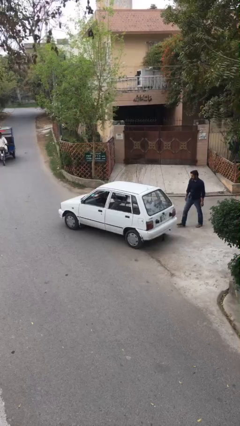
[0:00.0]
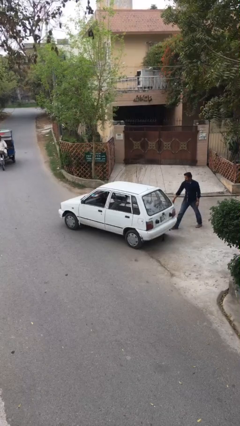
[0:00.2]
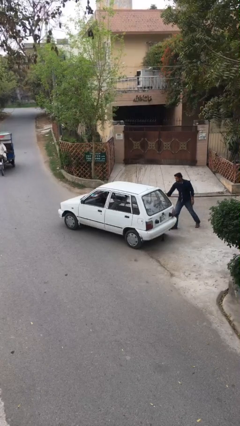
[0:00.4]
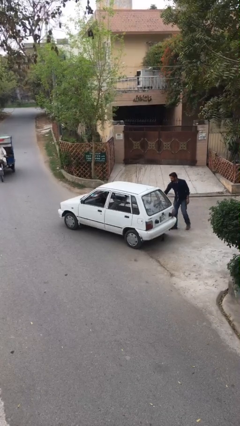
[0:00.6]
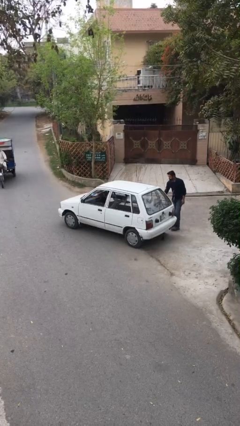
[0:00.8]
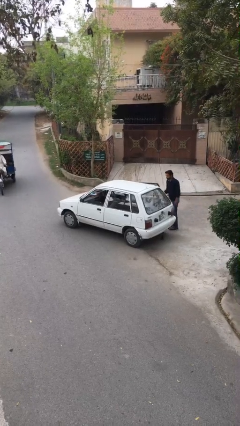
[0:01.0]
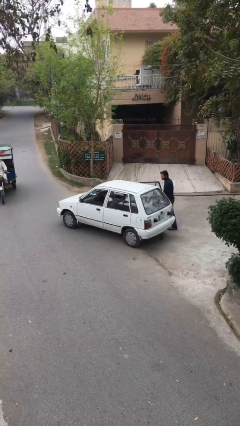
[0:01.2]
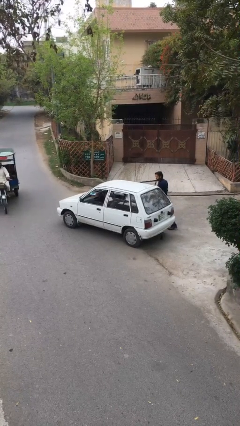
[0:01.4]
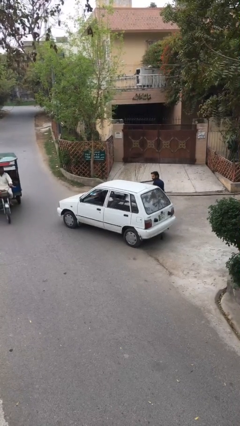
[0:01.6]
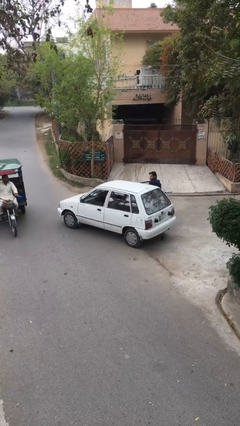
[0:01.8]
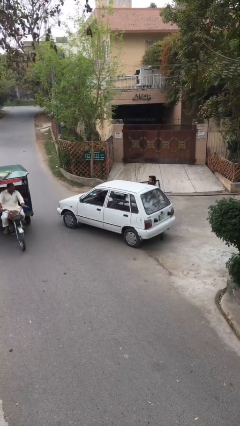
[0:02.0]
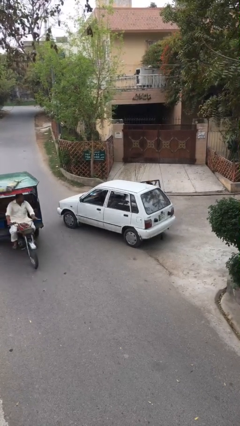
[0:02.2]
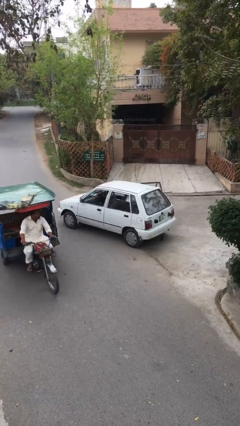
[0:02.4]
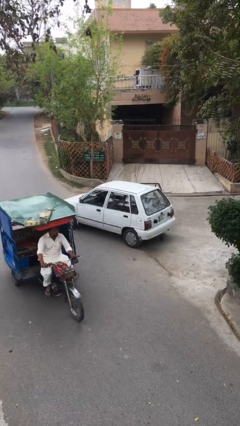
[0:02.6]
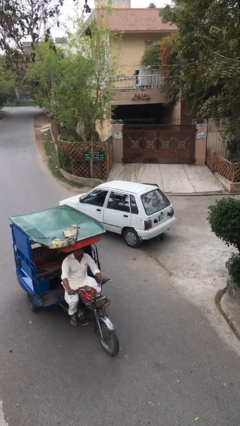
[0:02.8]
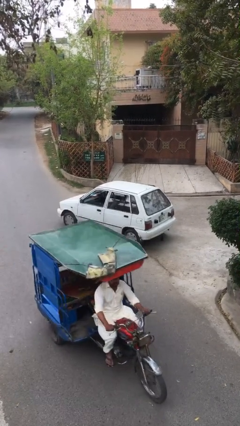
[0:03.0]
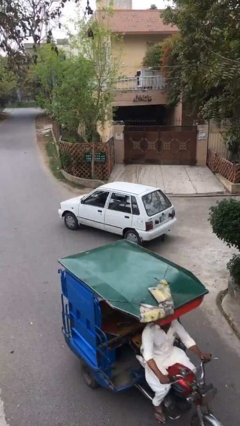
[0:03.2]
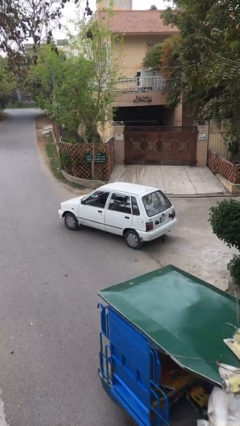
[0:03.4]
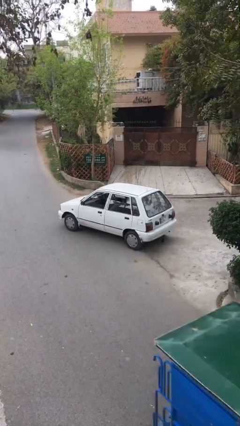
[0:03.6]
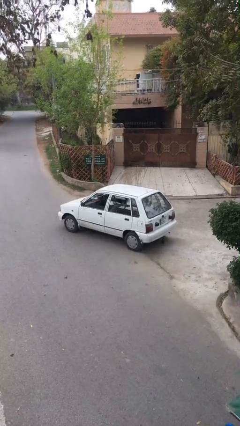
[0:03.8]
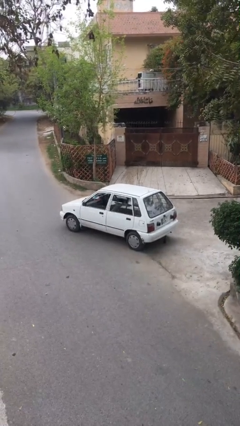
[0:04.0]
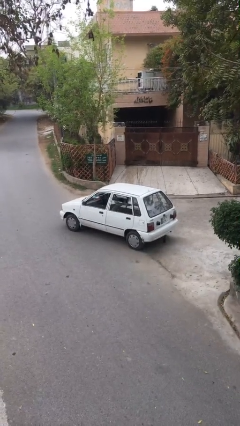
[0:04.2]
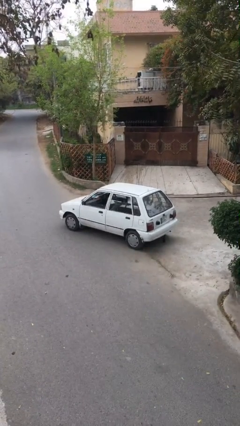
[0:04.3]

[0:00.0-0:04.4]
car picks up person

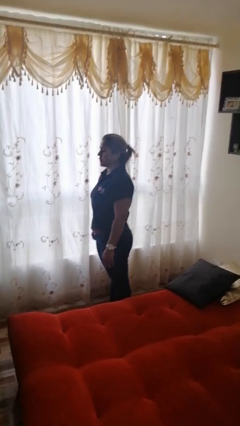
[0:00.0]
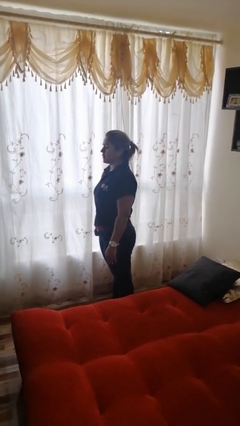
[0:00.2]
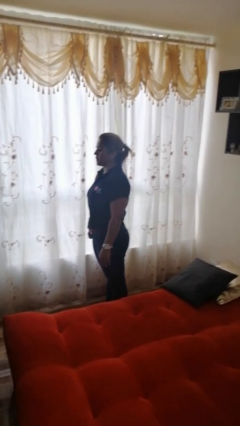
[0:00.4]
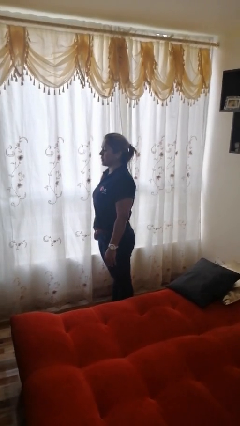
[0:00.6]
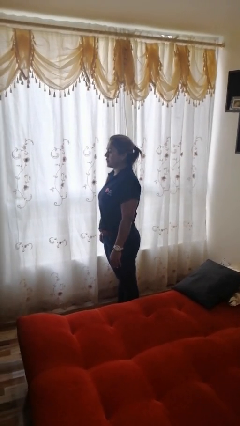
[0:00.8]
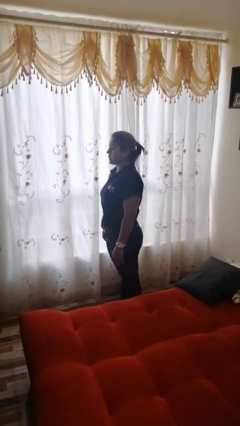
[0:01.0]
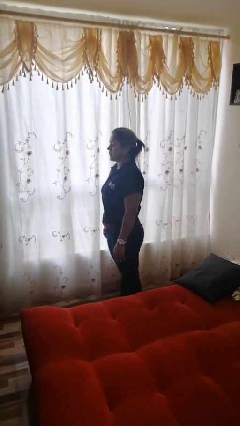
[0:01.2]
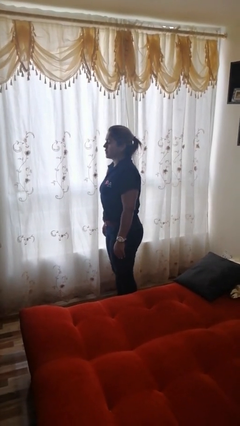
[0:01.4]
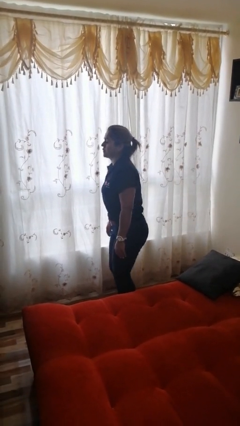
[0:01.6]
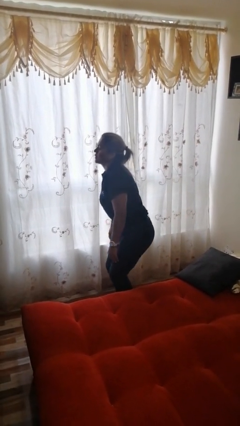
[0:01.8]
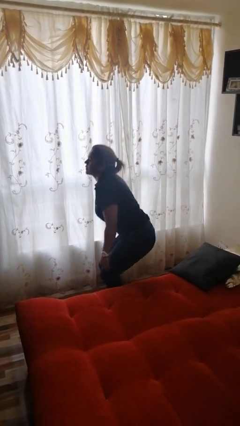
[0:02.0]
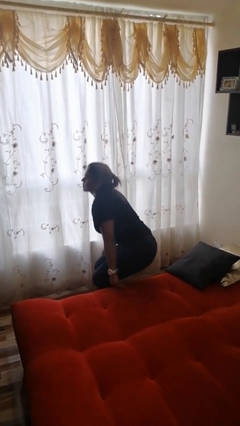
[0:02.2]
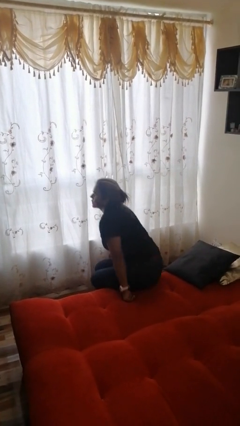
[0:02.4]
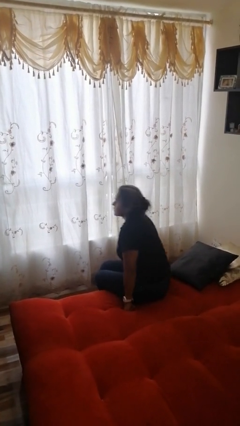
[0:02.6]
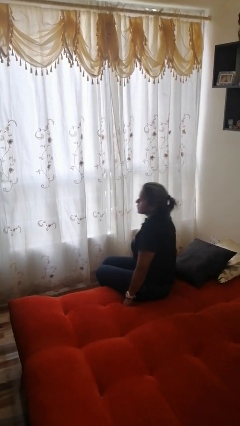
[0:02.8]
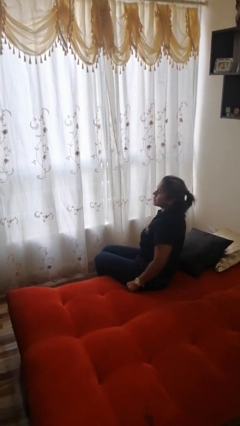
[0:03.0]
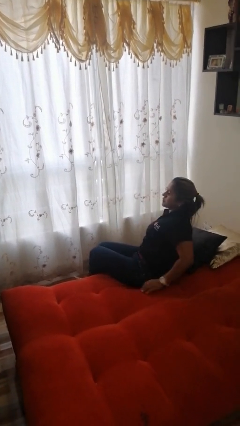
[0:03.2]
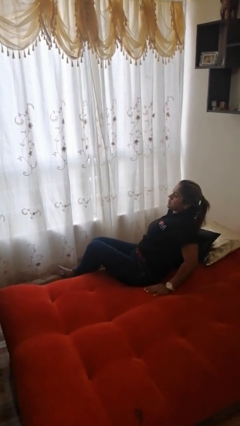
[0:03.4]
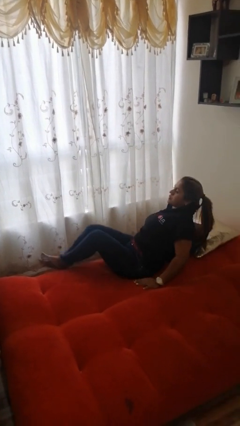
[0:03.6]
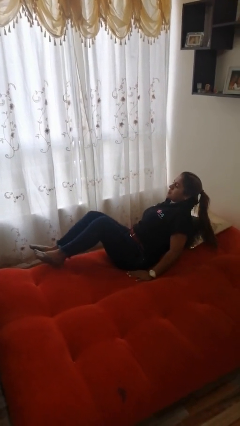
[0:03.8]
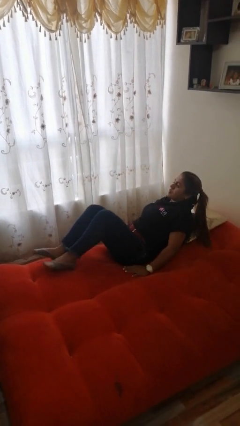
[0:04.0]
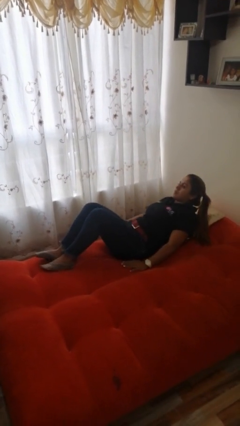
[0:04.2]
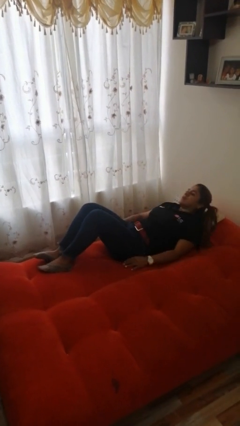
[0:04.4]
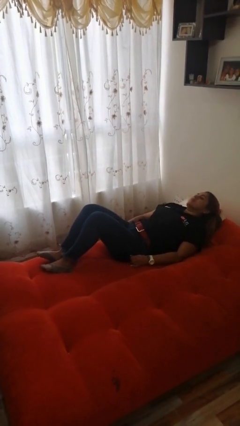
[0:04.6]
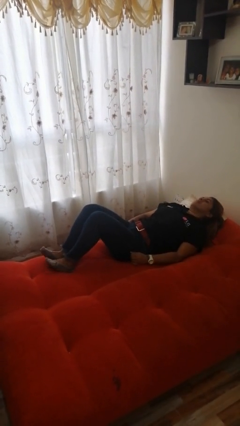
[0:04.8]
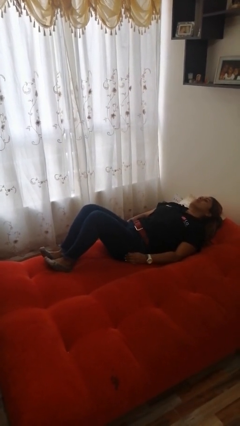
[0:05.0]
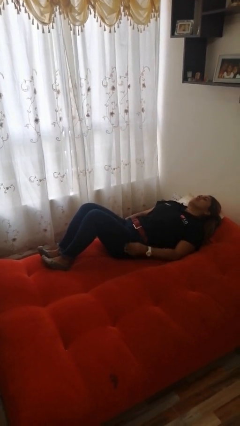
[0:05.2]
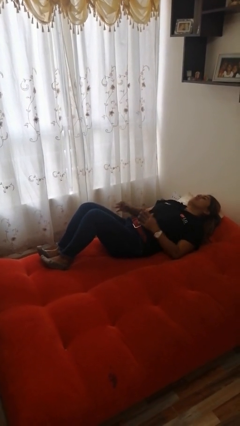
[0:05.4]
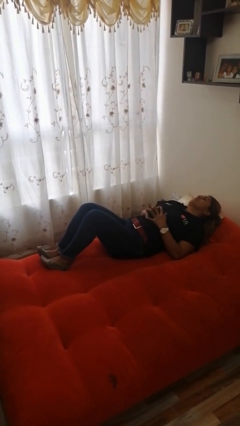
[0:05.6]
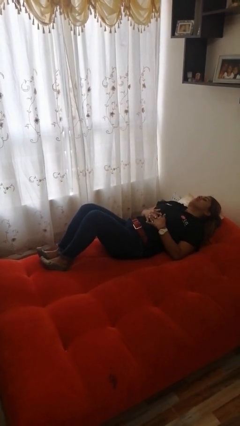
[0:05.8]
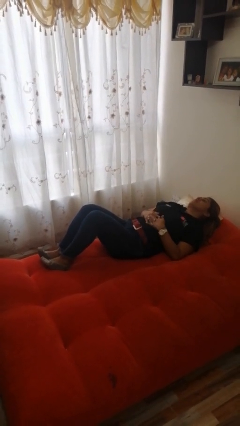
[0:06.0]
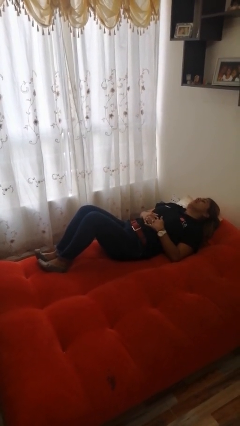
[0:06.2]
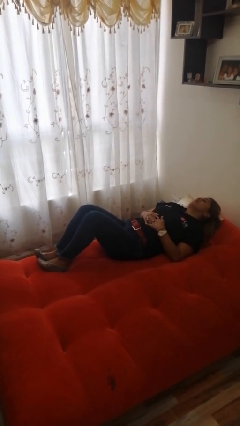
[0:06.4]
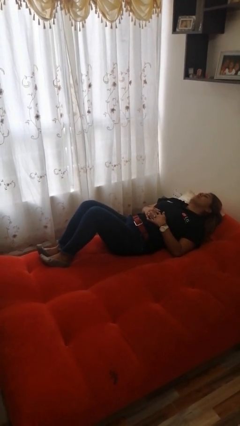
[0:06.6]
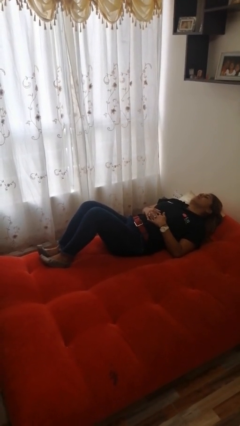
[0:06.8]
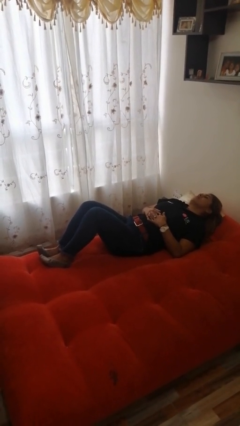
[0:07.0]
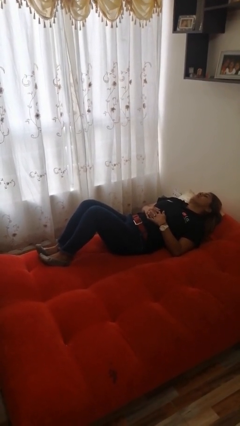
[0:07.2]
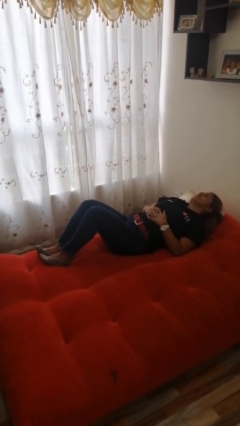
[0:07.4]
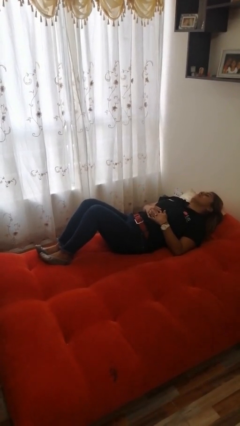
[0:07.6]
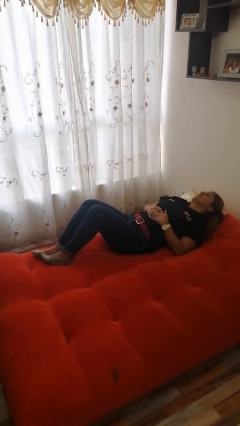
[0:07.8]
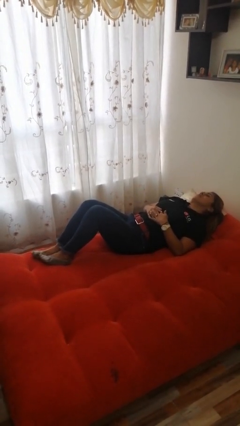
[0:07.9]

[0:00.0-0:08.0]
person lies down on bed

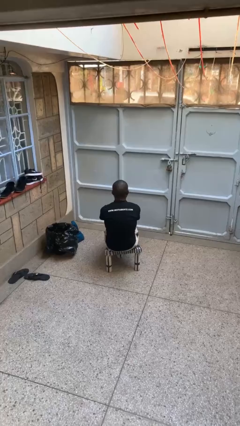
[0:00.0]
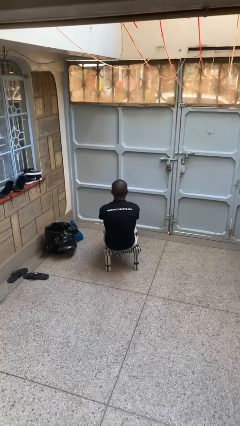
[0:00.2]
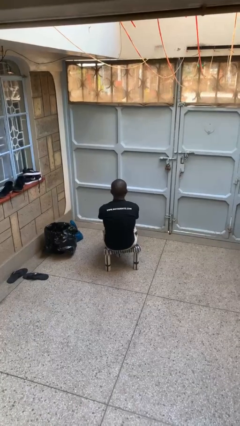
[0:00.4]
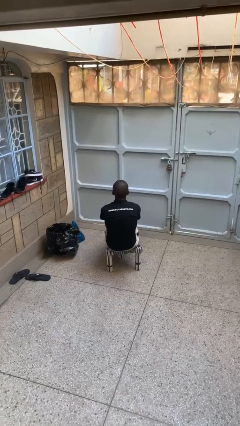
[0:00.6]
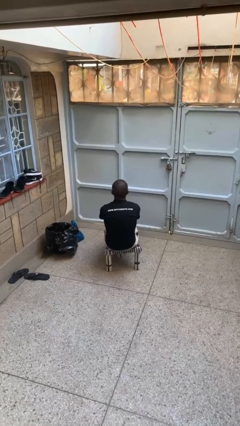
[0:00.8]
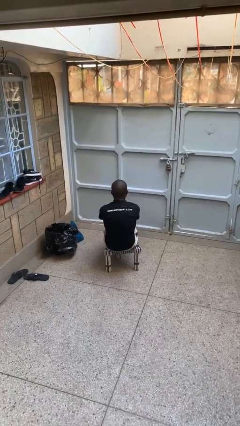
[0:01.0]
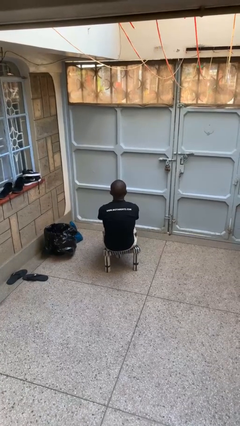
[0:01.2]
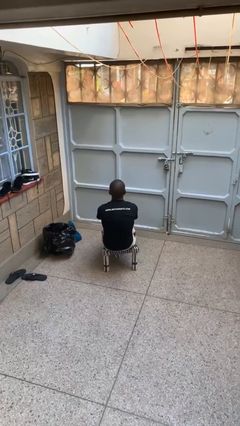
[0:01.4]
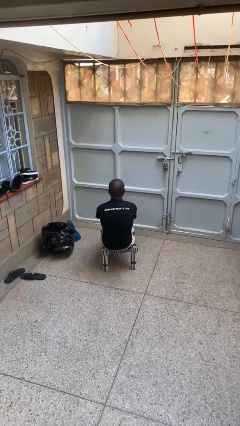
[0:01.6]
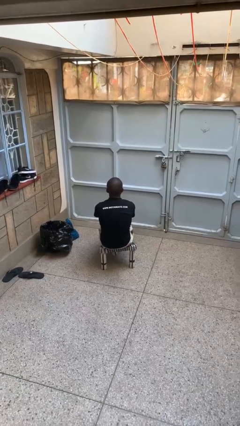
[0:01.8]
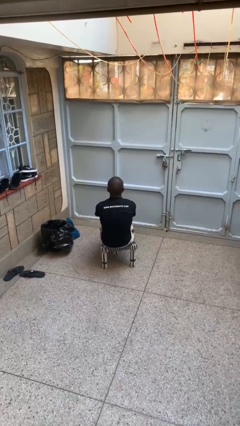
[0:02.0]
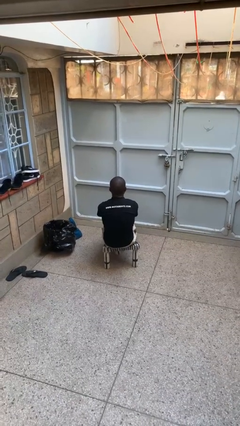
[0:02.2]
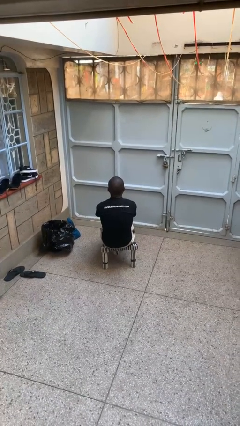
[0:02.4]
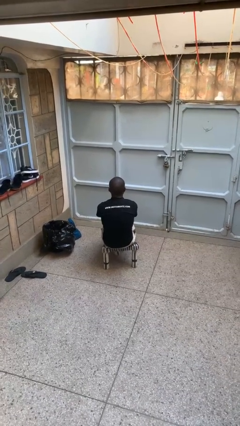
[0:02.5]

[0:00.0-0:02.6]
person nods head

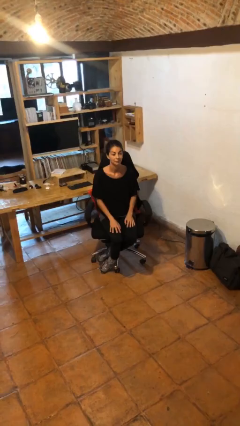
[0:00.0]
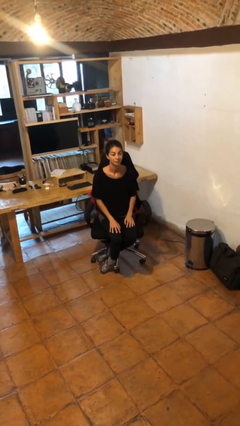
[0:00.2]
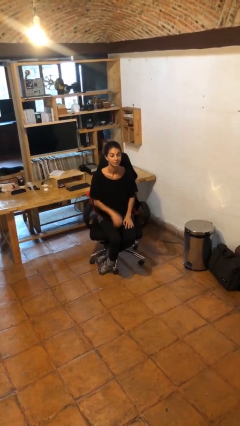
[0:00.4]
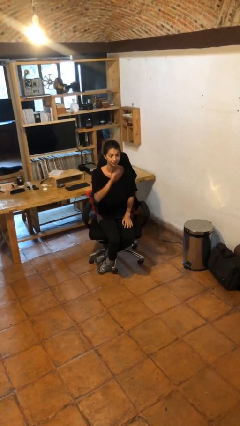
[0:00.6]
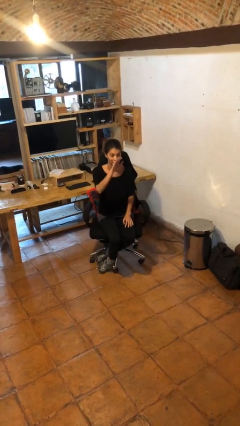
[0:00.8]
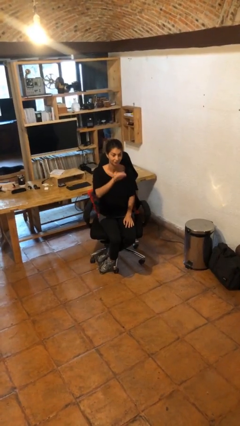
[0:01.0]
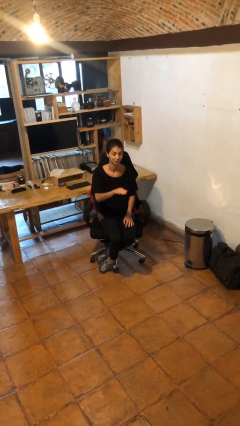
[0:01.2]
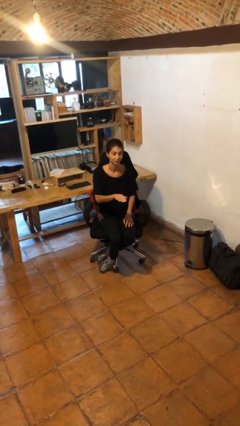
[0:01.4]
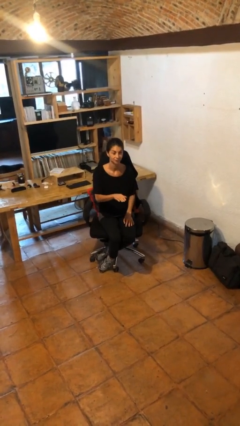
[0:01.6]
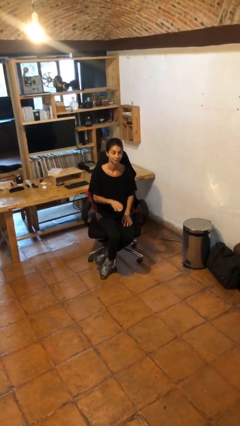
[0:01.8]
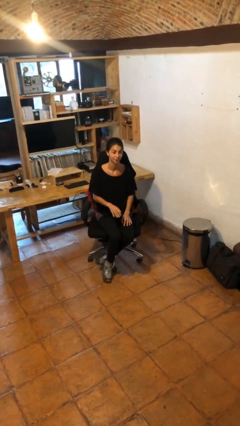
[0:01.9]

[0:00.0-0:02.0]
person gestures swipe down

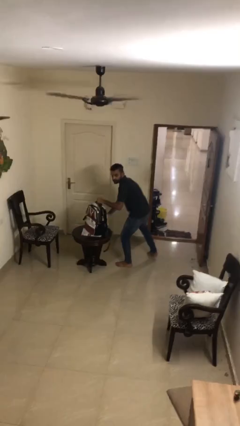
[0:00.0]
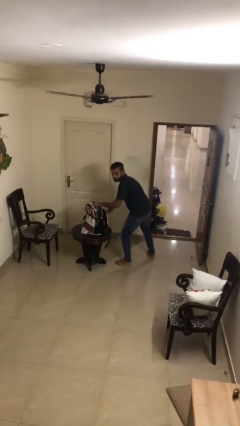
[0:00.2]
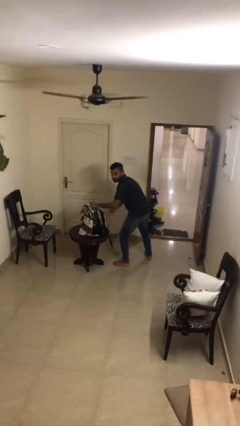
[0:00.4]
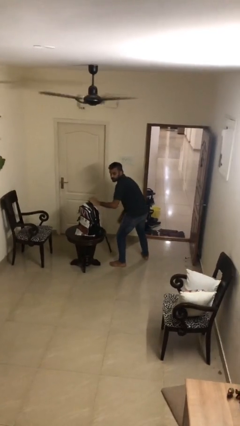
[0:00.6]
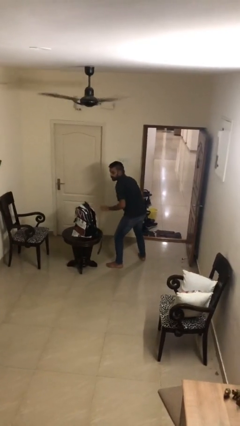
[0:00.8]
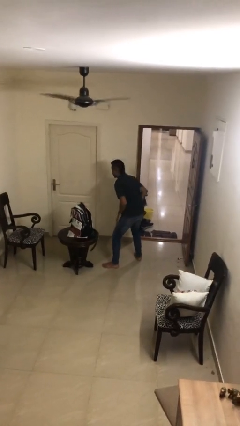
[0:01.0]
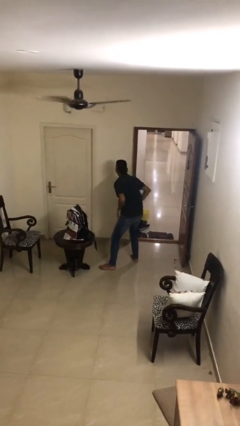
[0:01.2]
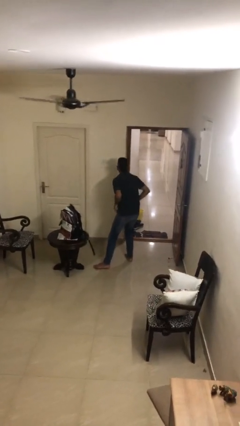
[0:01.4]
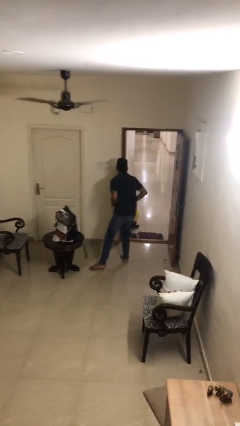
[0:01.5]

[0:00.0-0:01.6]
person puts down object on table
